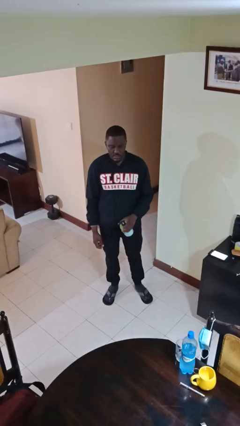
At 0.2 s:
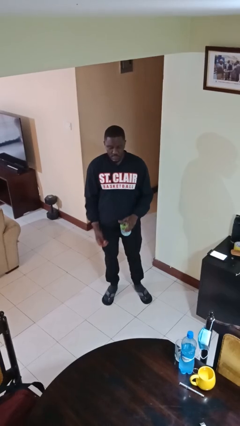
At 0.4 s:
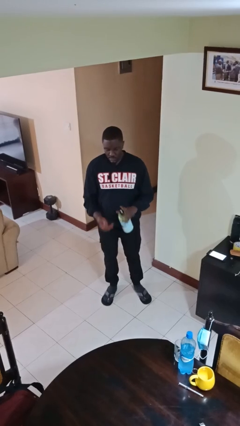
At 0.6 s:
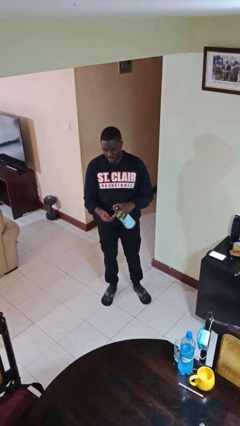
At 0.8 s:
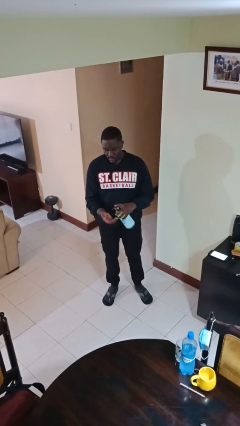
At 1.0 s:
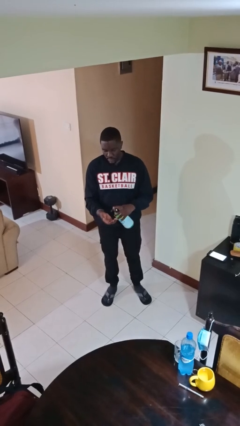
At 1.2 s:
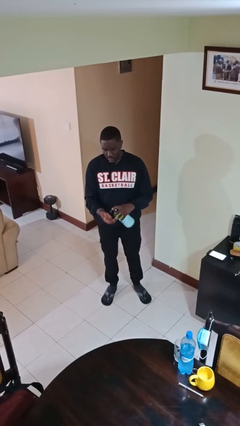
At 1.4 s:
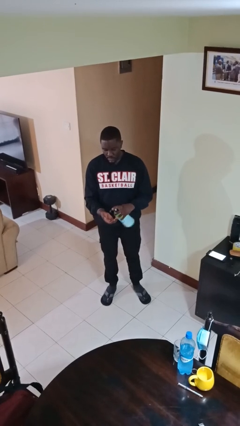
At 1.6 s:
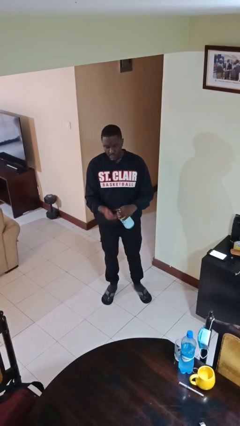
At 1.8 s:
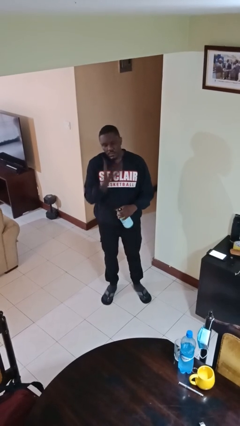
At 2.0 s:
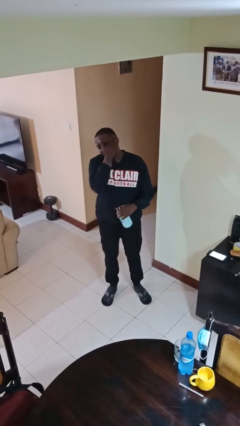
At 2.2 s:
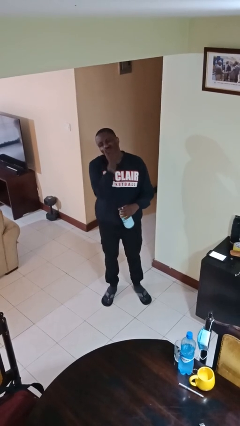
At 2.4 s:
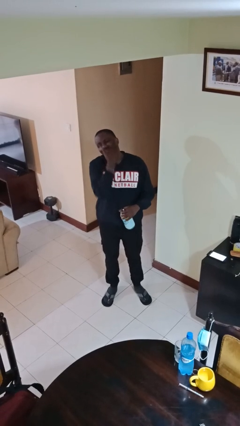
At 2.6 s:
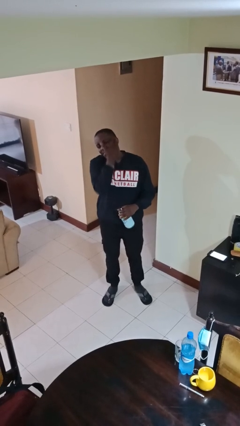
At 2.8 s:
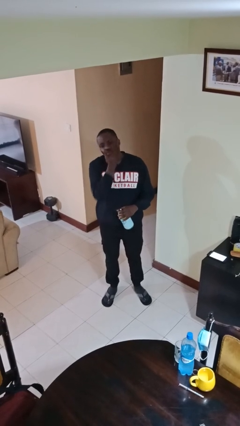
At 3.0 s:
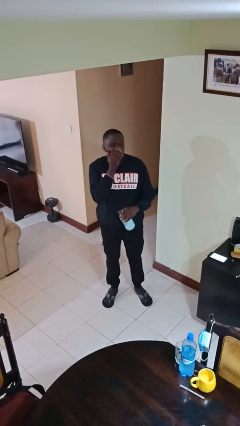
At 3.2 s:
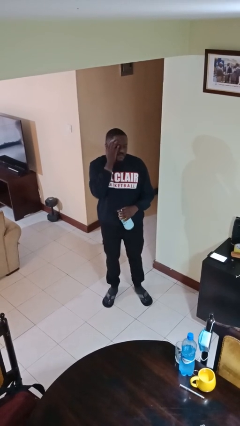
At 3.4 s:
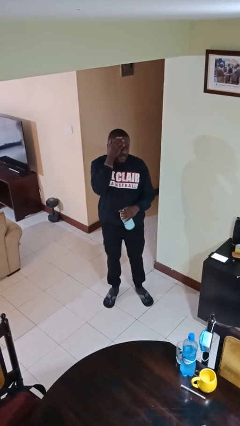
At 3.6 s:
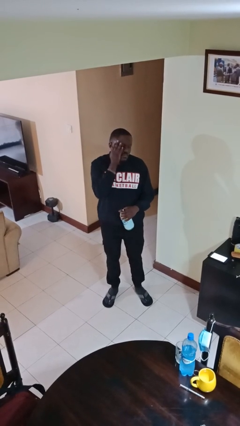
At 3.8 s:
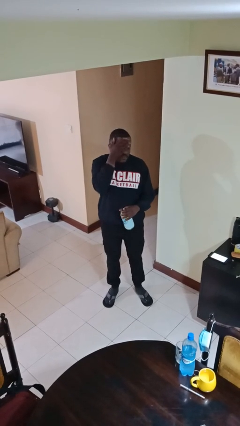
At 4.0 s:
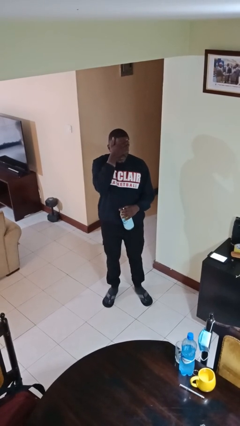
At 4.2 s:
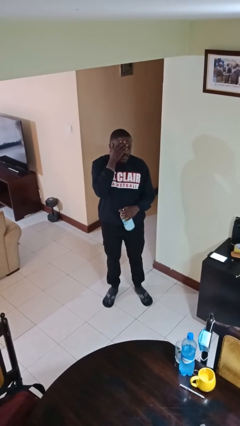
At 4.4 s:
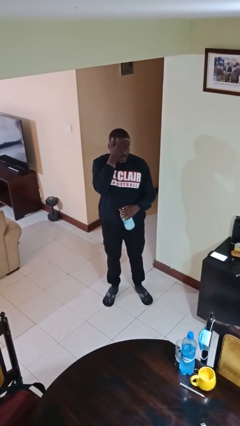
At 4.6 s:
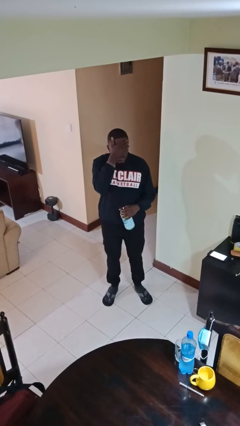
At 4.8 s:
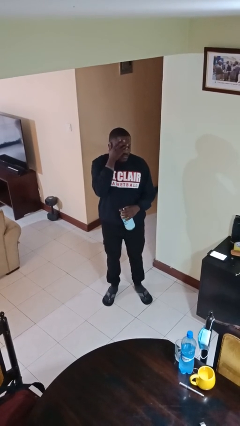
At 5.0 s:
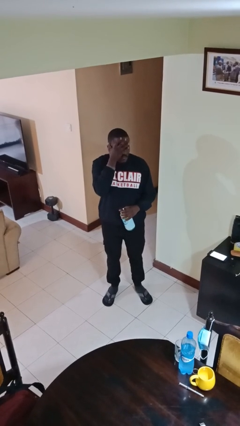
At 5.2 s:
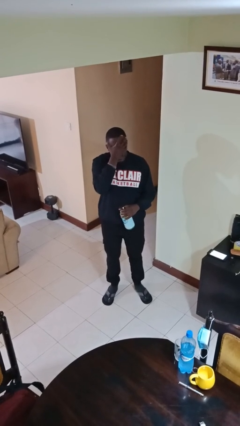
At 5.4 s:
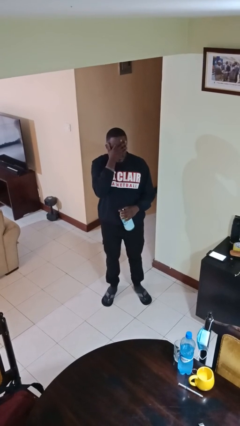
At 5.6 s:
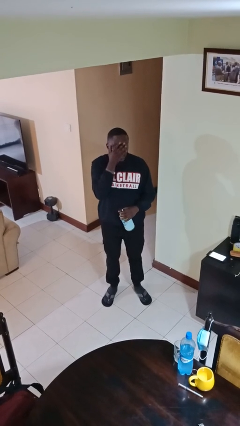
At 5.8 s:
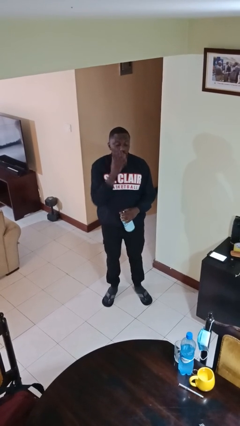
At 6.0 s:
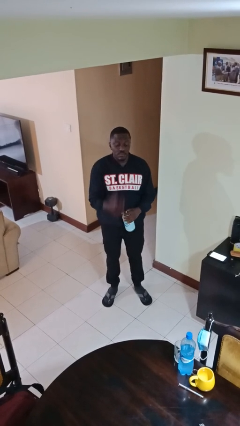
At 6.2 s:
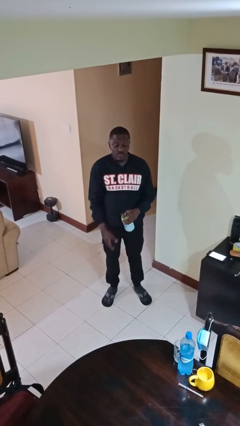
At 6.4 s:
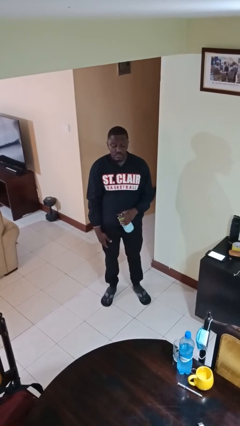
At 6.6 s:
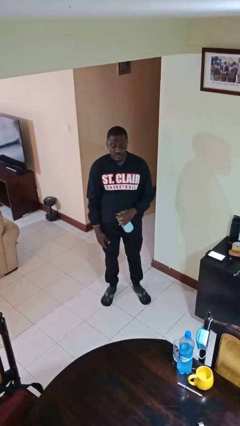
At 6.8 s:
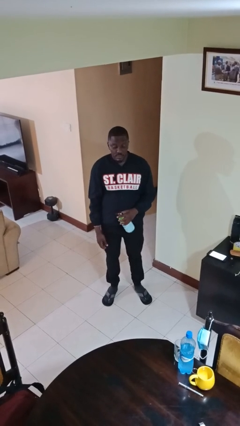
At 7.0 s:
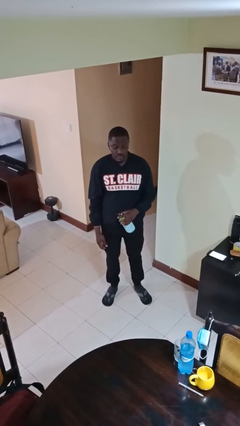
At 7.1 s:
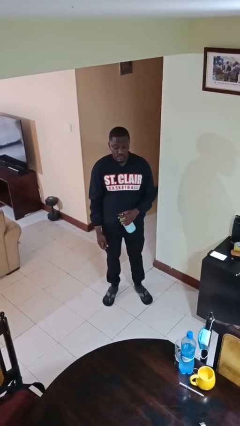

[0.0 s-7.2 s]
person applies facial moisturizer

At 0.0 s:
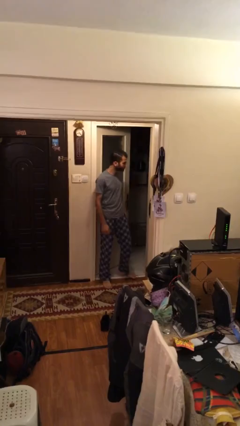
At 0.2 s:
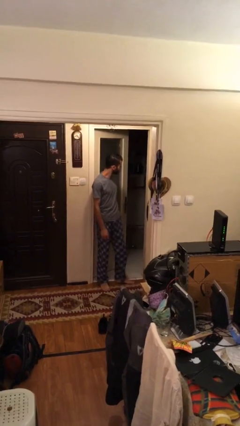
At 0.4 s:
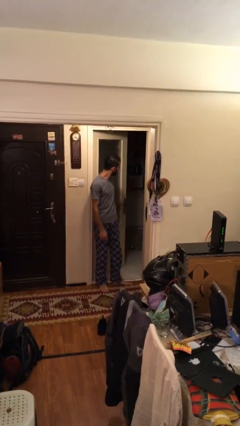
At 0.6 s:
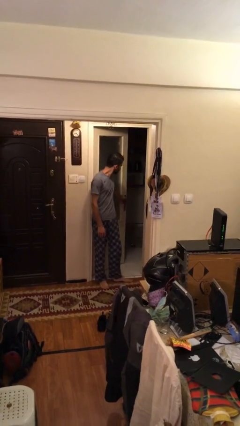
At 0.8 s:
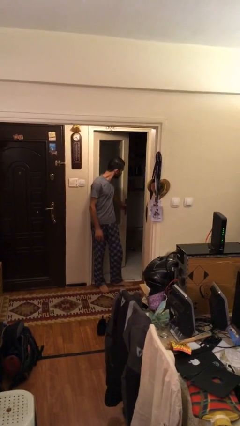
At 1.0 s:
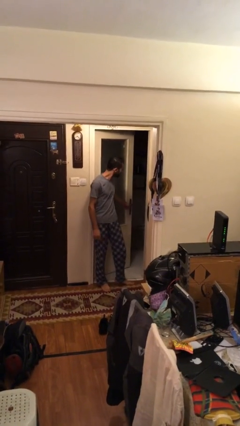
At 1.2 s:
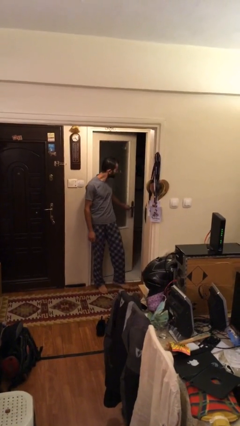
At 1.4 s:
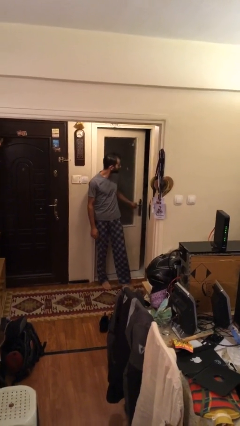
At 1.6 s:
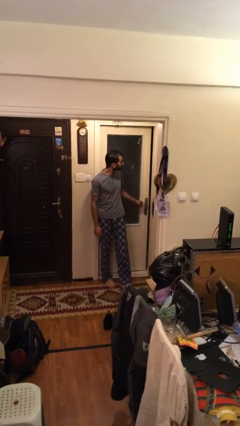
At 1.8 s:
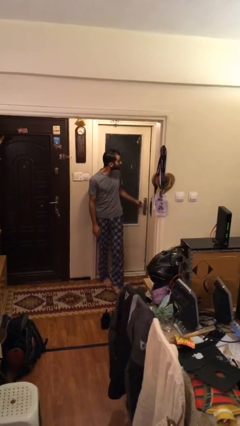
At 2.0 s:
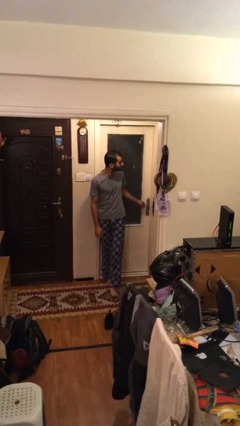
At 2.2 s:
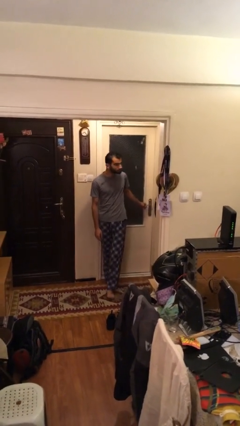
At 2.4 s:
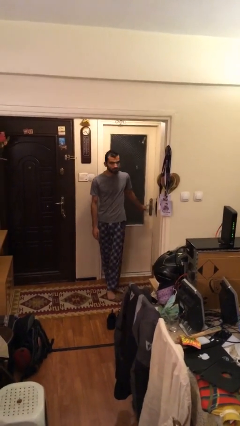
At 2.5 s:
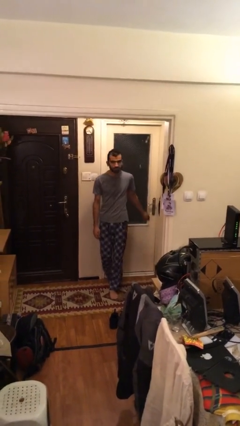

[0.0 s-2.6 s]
person closes facility door

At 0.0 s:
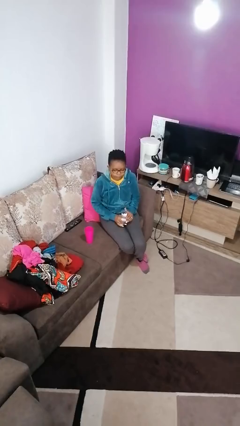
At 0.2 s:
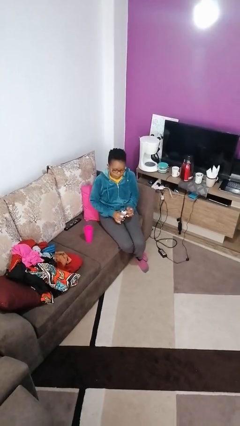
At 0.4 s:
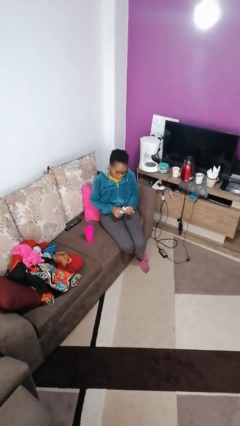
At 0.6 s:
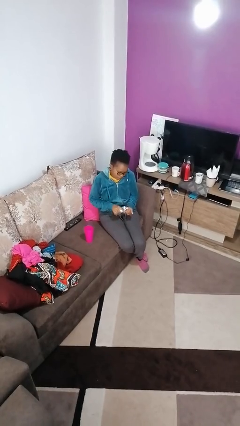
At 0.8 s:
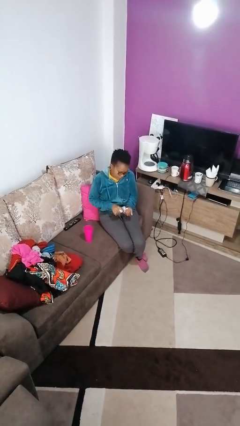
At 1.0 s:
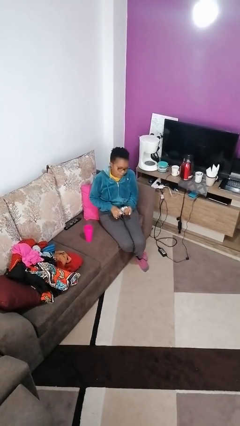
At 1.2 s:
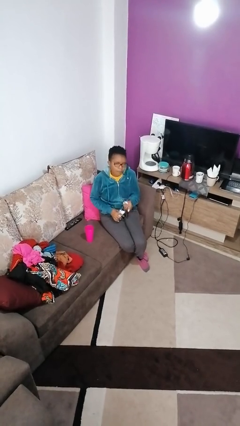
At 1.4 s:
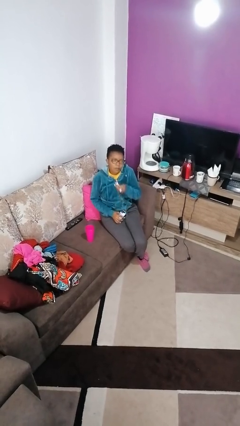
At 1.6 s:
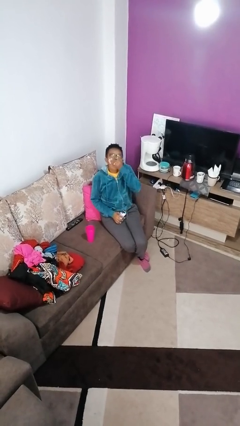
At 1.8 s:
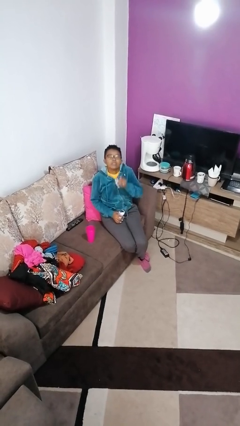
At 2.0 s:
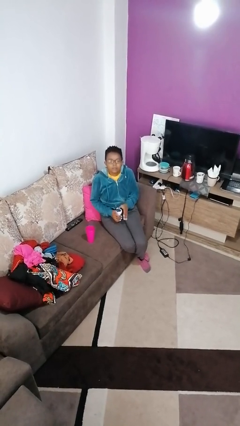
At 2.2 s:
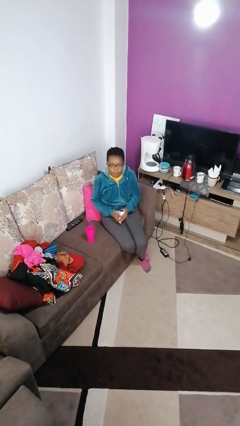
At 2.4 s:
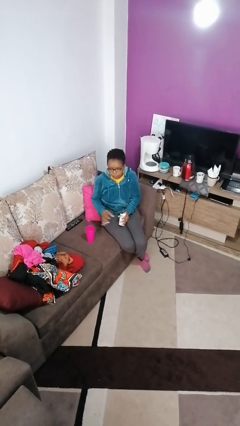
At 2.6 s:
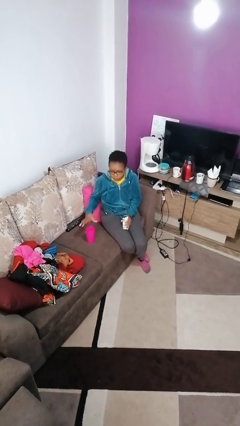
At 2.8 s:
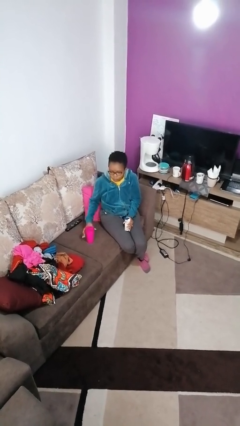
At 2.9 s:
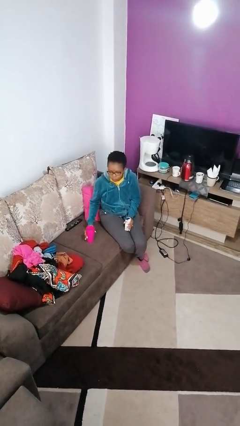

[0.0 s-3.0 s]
person takes medicine pills

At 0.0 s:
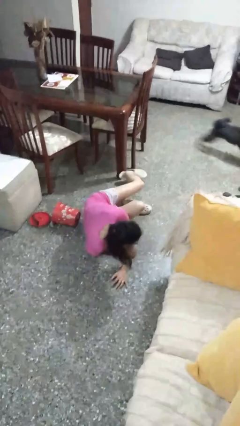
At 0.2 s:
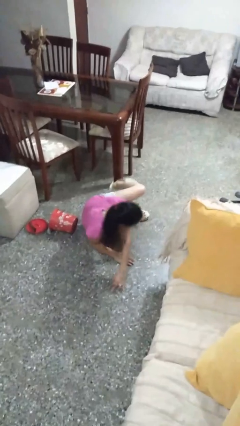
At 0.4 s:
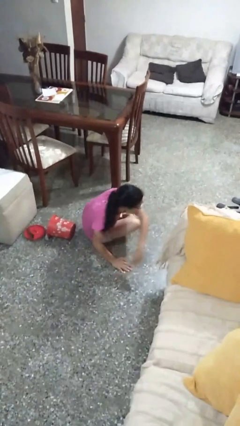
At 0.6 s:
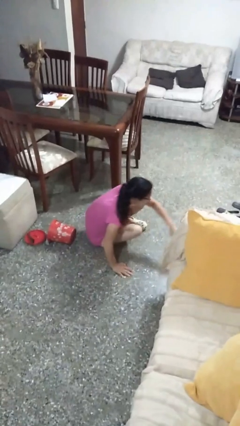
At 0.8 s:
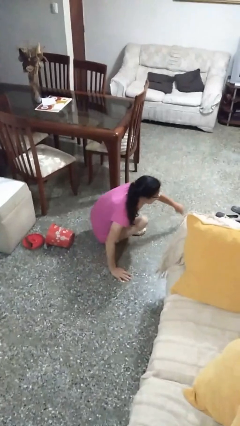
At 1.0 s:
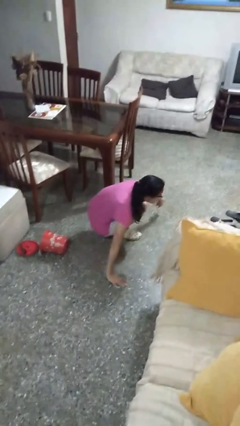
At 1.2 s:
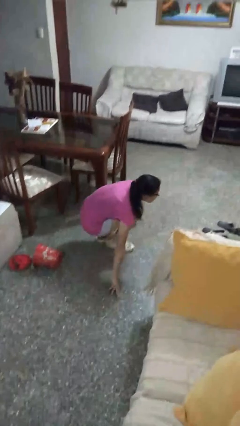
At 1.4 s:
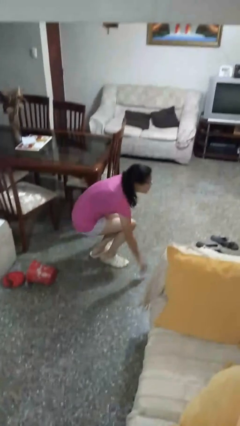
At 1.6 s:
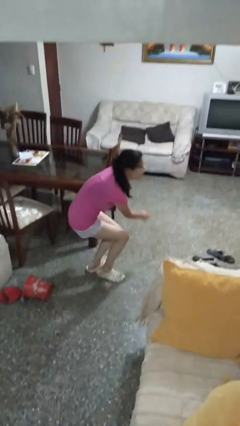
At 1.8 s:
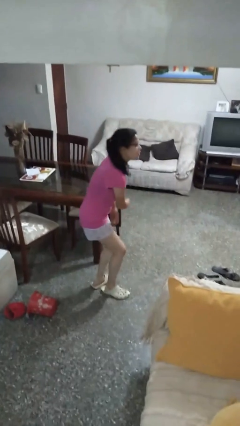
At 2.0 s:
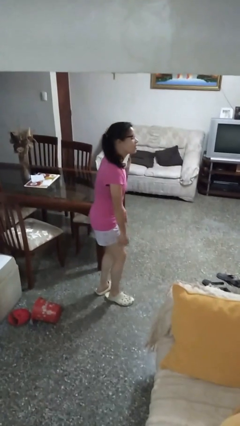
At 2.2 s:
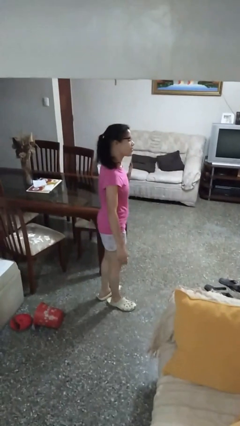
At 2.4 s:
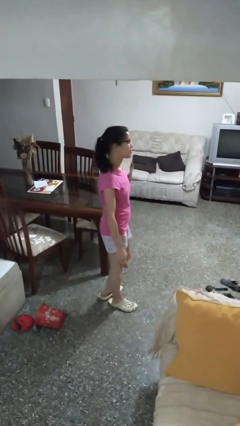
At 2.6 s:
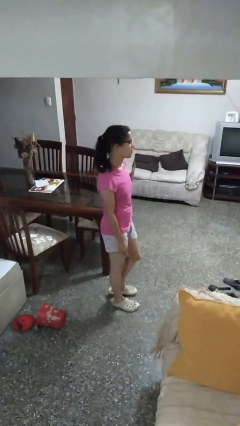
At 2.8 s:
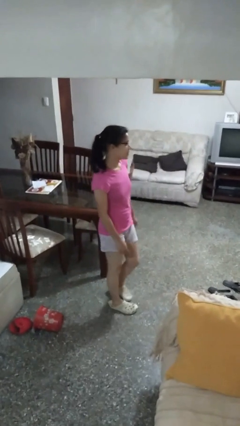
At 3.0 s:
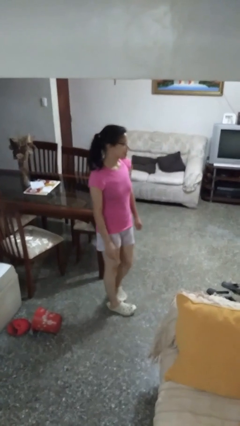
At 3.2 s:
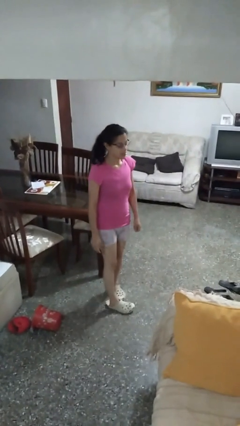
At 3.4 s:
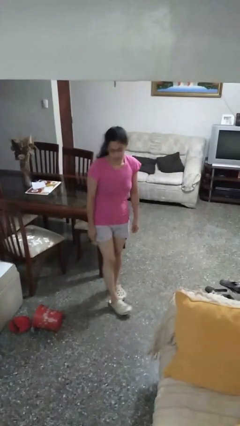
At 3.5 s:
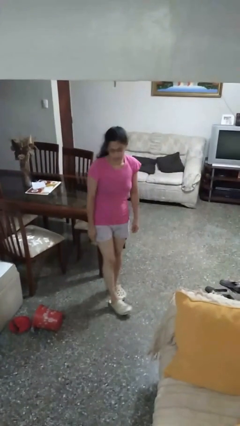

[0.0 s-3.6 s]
person stands up from floor

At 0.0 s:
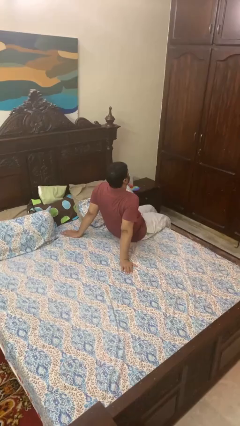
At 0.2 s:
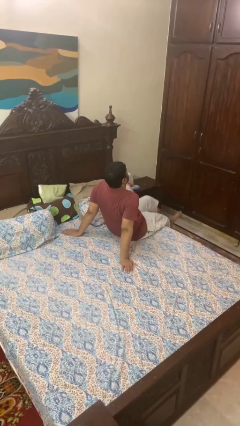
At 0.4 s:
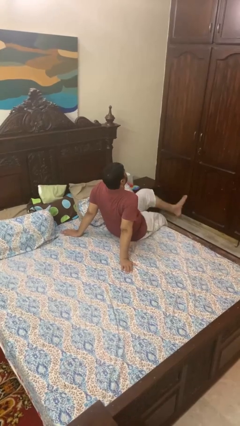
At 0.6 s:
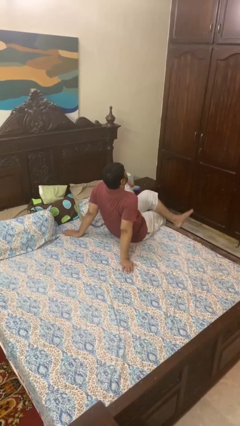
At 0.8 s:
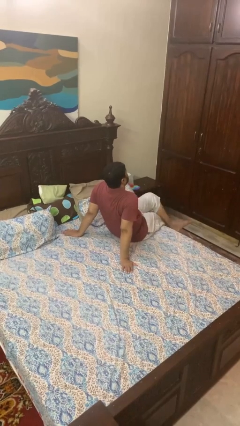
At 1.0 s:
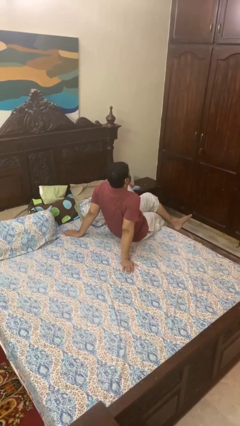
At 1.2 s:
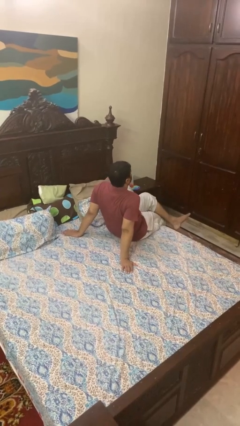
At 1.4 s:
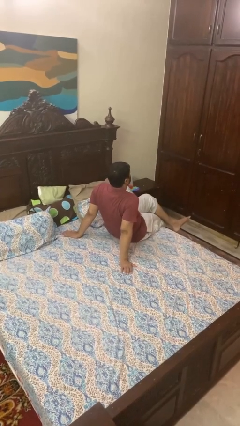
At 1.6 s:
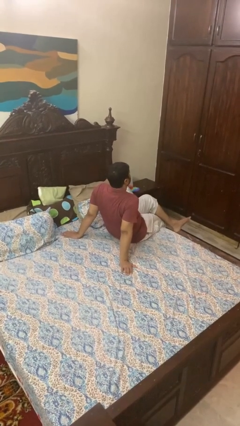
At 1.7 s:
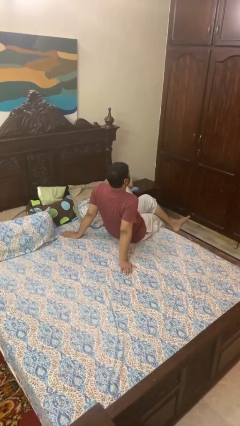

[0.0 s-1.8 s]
person crosses legs
